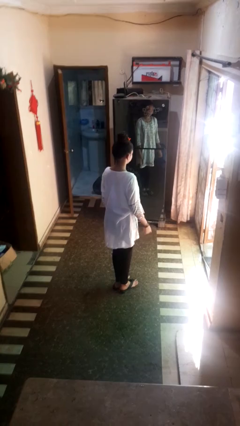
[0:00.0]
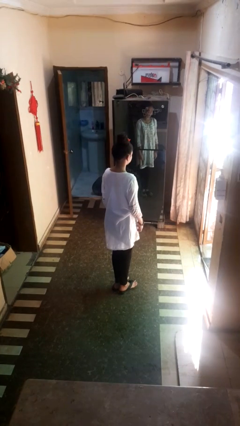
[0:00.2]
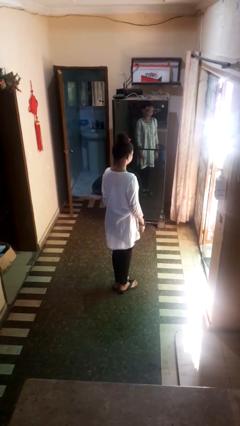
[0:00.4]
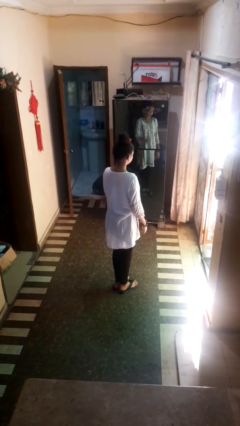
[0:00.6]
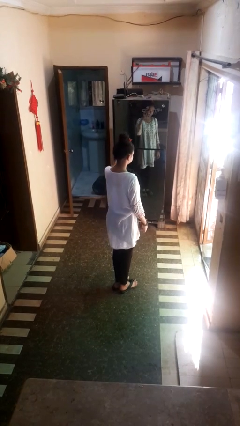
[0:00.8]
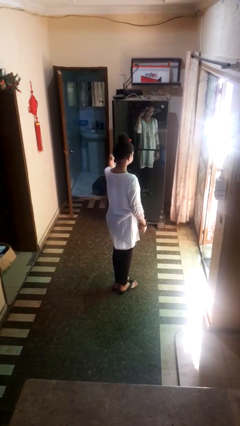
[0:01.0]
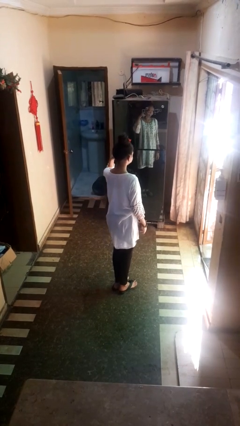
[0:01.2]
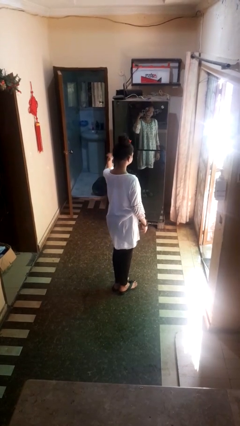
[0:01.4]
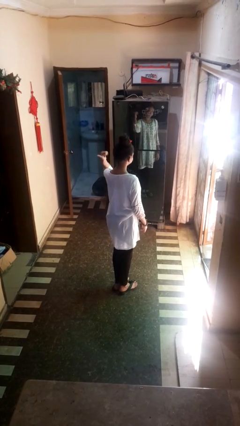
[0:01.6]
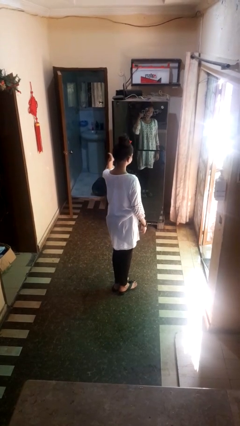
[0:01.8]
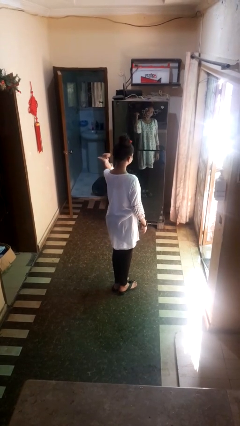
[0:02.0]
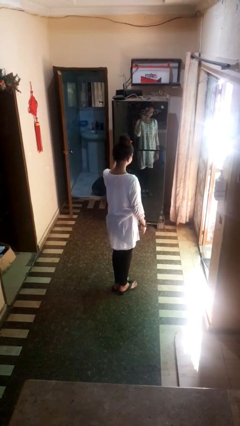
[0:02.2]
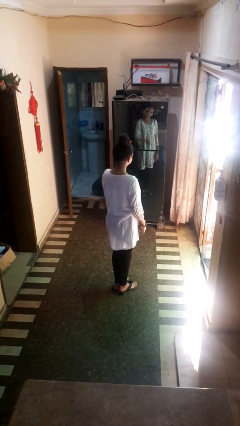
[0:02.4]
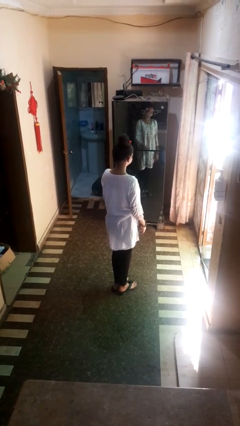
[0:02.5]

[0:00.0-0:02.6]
person gestures behind me

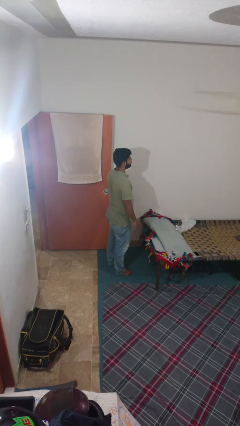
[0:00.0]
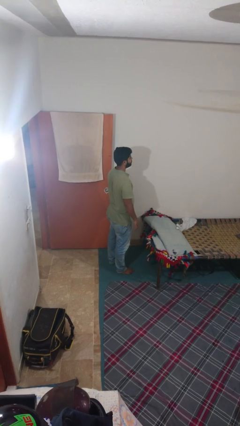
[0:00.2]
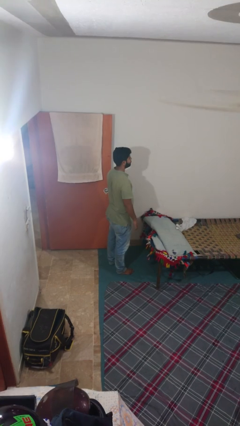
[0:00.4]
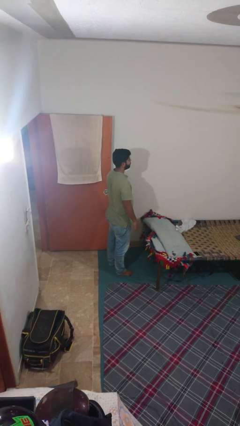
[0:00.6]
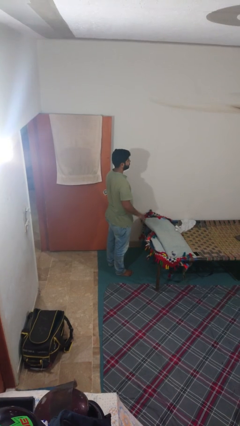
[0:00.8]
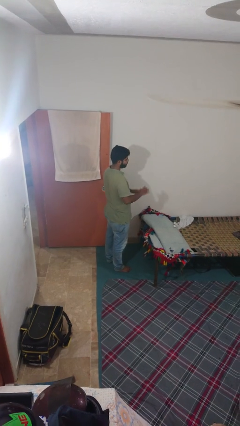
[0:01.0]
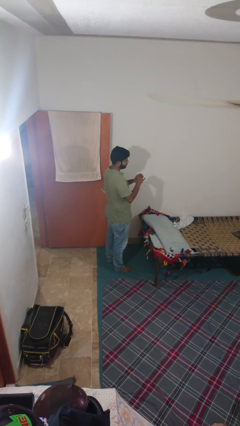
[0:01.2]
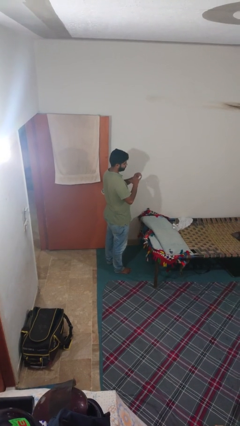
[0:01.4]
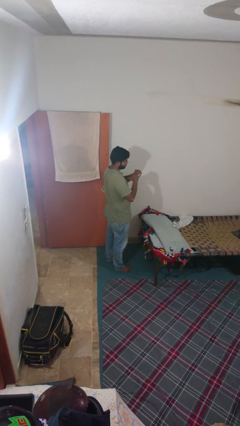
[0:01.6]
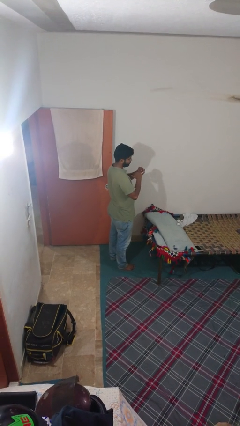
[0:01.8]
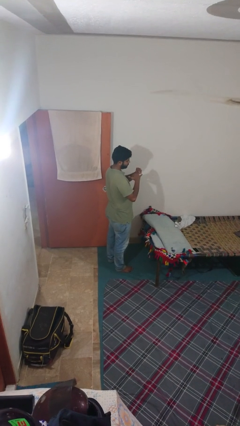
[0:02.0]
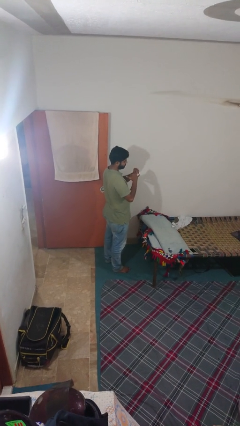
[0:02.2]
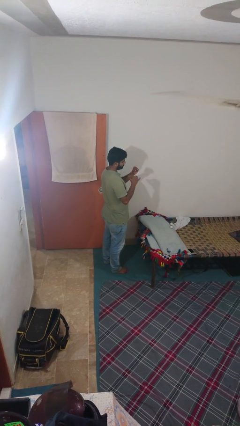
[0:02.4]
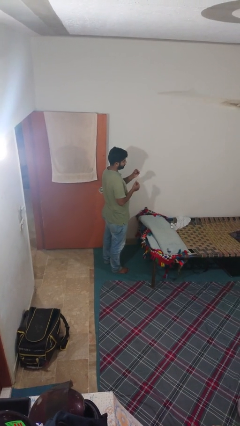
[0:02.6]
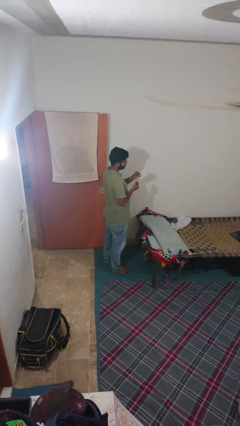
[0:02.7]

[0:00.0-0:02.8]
person takes off ring

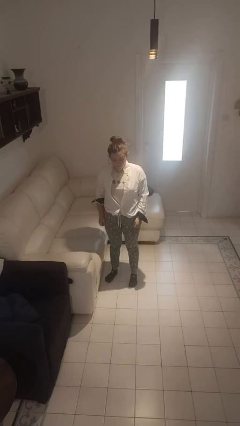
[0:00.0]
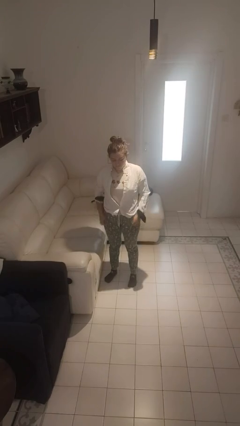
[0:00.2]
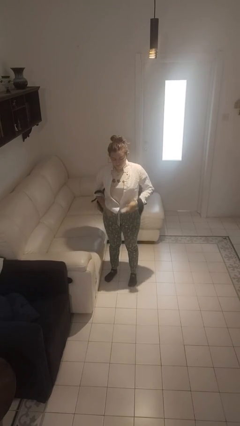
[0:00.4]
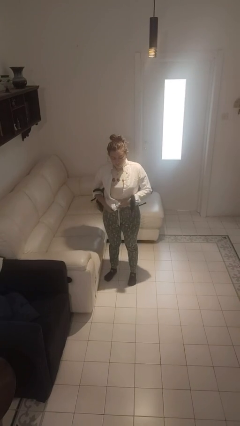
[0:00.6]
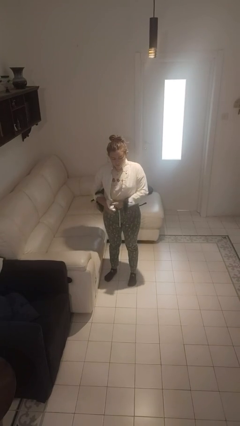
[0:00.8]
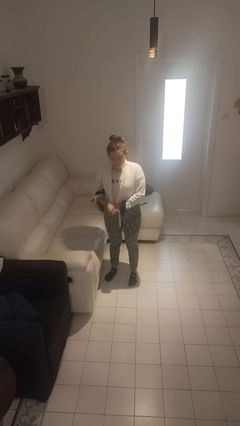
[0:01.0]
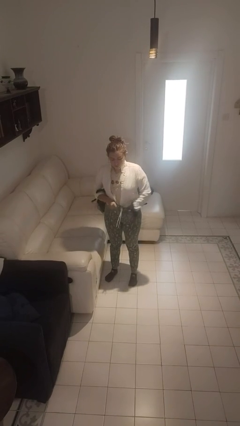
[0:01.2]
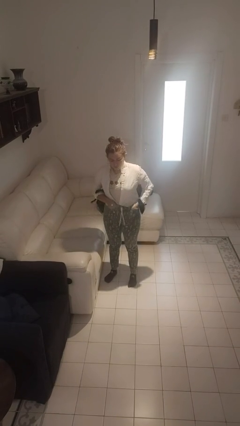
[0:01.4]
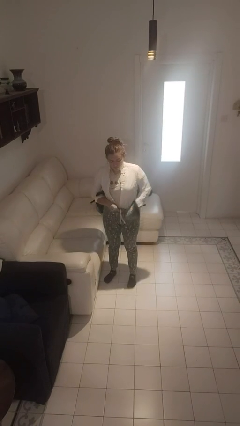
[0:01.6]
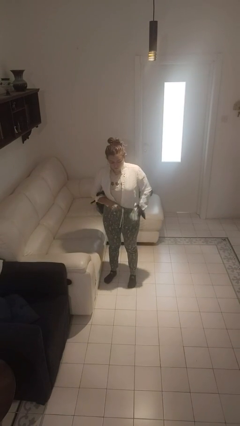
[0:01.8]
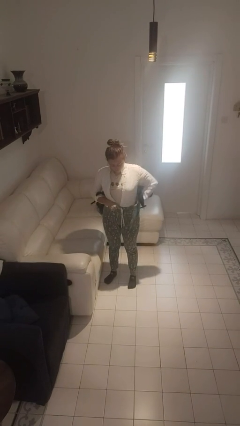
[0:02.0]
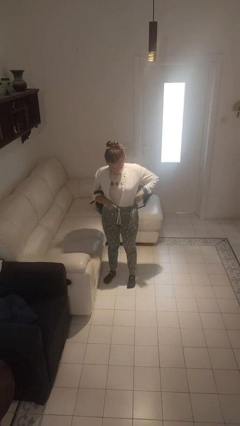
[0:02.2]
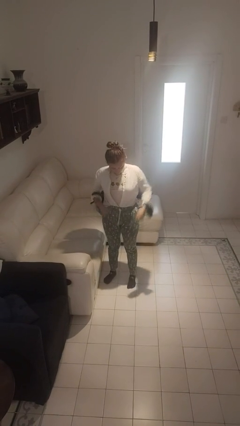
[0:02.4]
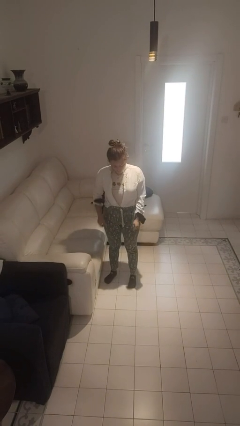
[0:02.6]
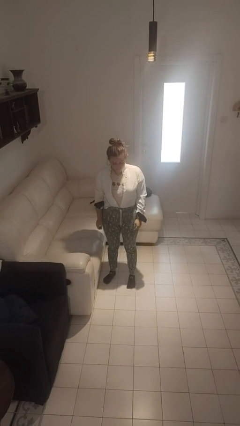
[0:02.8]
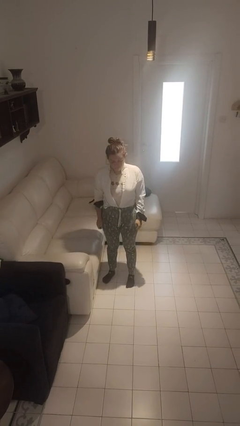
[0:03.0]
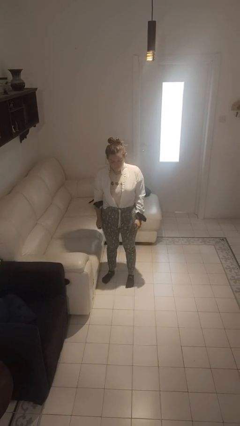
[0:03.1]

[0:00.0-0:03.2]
person tucks in shirt

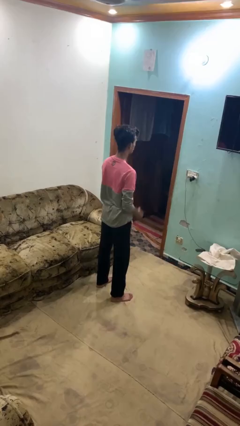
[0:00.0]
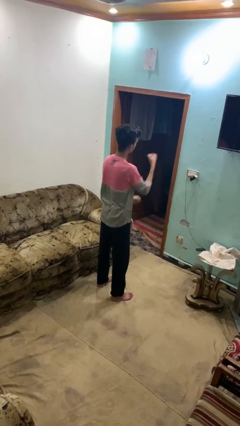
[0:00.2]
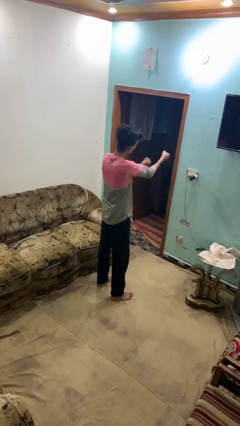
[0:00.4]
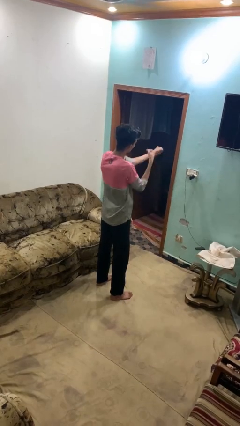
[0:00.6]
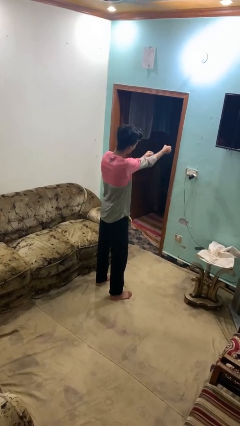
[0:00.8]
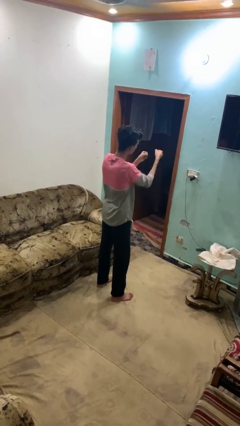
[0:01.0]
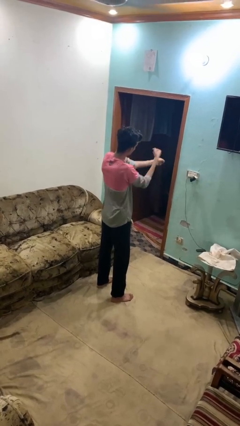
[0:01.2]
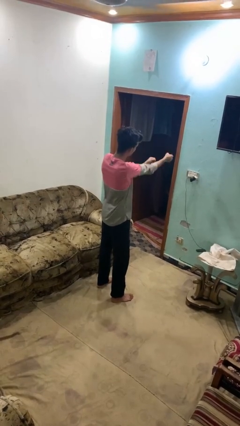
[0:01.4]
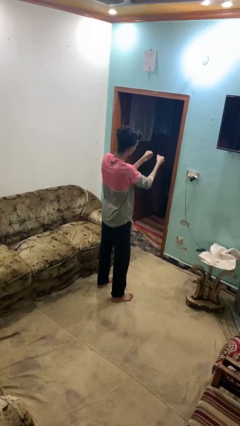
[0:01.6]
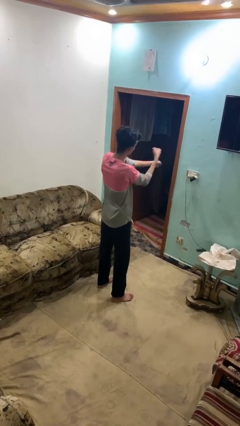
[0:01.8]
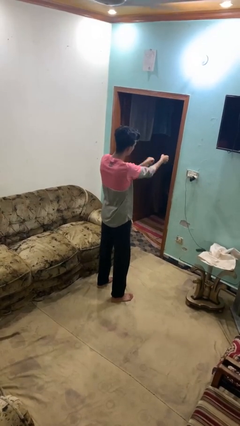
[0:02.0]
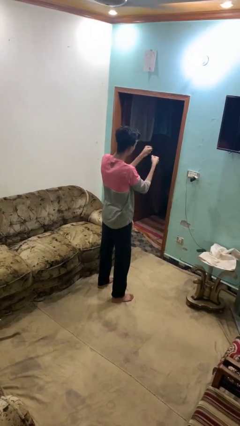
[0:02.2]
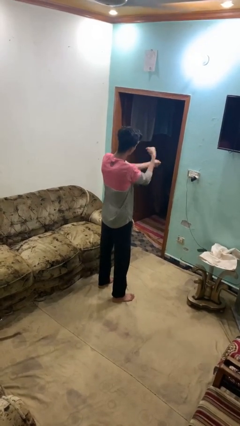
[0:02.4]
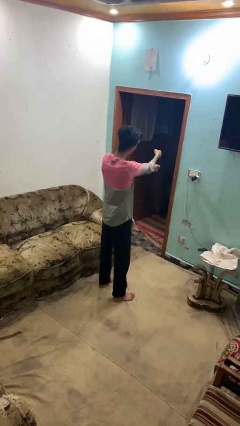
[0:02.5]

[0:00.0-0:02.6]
person punches

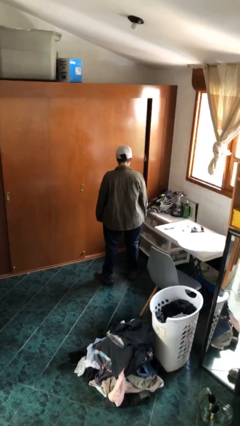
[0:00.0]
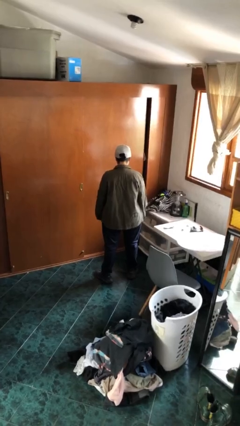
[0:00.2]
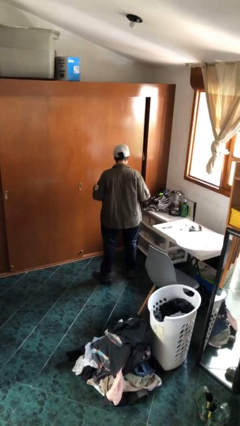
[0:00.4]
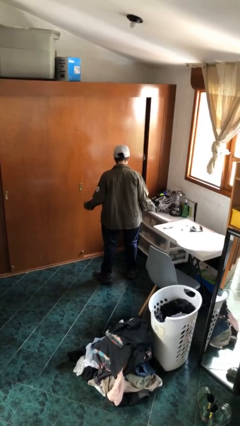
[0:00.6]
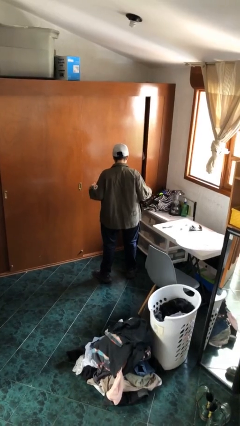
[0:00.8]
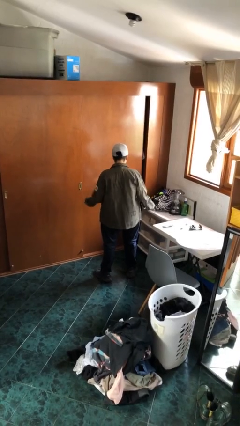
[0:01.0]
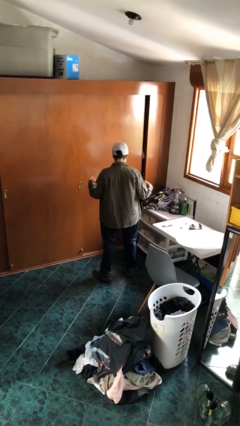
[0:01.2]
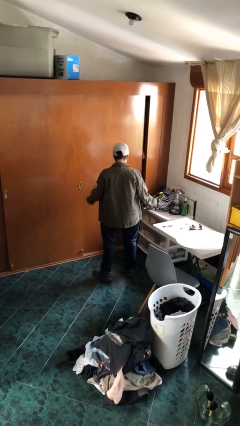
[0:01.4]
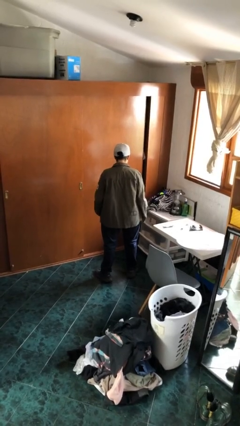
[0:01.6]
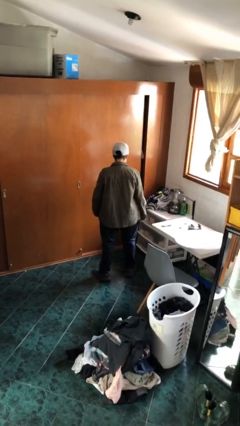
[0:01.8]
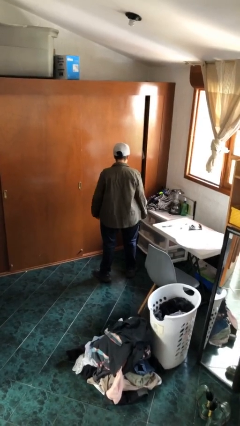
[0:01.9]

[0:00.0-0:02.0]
person snaps fingers

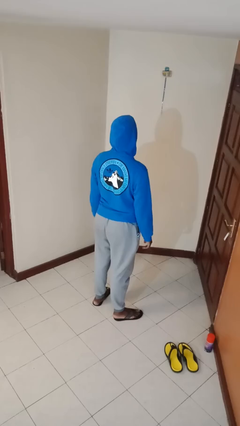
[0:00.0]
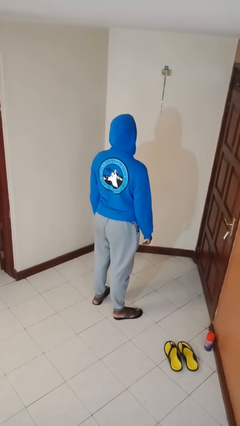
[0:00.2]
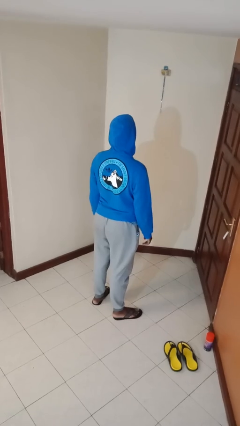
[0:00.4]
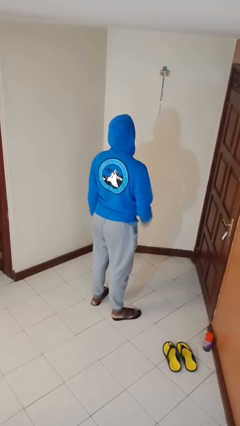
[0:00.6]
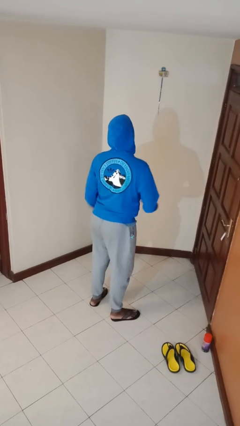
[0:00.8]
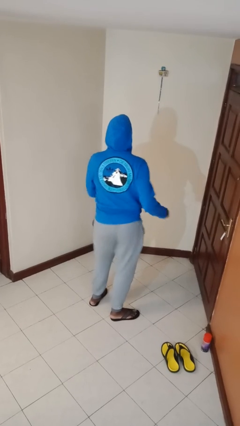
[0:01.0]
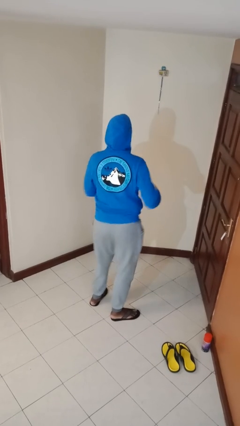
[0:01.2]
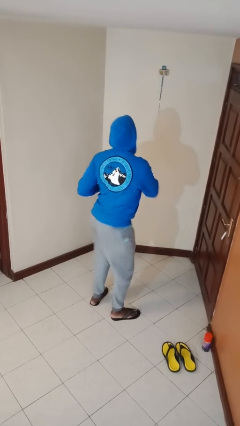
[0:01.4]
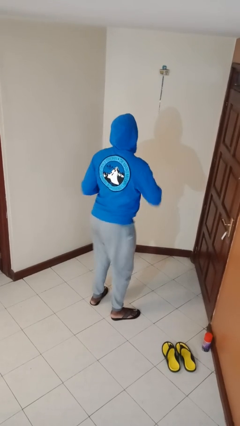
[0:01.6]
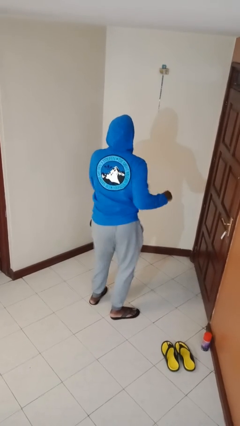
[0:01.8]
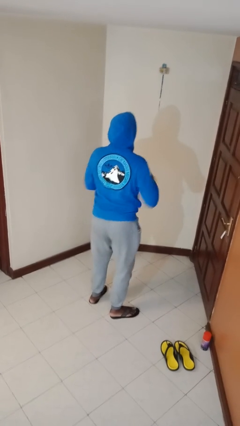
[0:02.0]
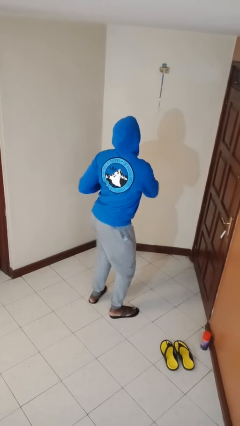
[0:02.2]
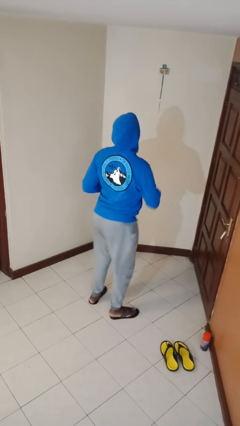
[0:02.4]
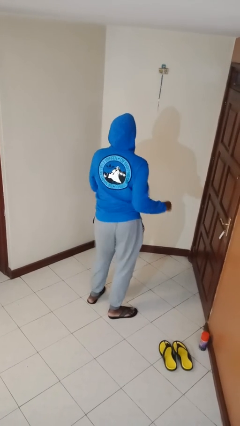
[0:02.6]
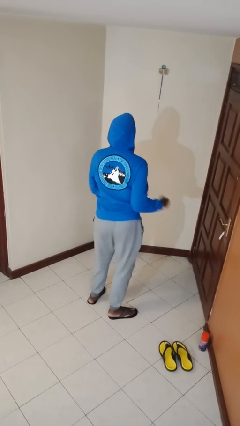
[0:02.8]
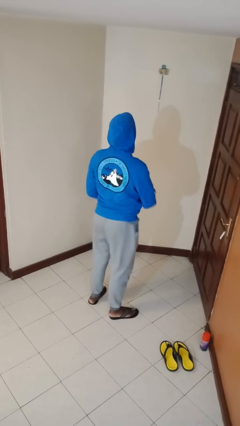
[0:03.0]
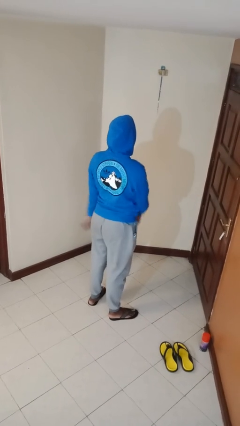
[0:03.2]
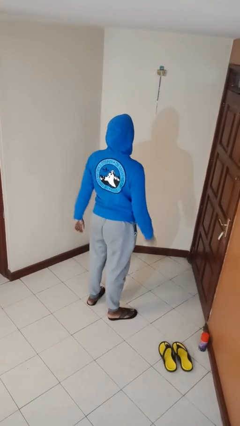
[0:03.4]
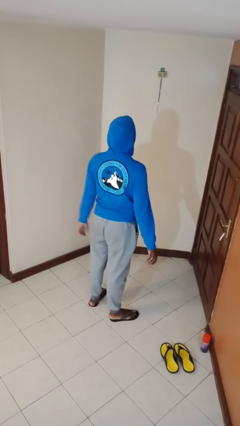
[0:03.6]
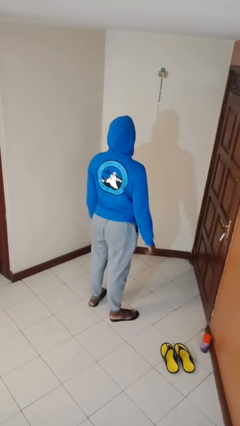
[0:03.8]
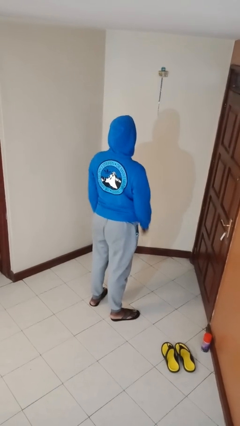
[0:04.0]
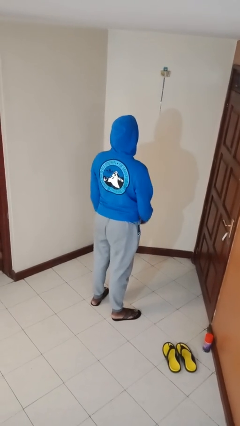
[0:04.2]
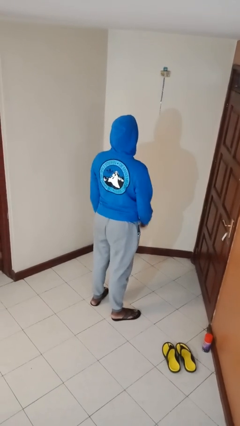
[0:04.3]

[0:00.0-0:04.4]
person wiggles hips
